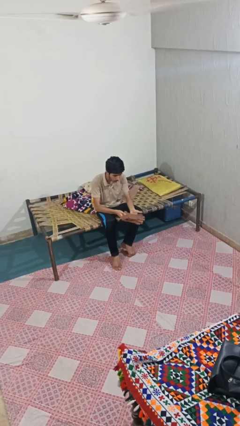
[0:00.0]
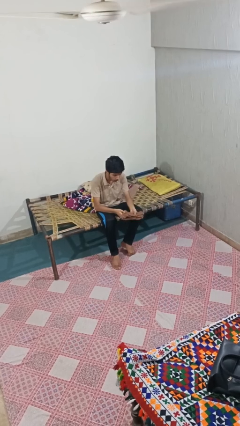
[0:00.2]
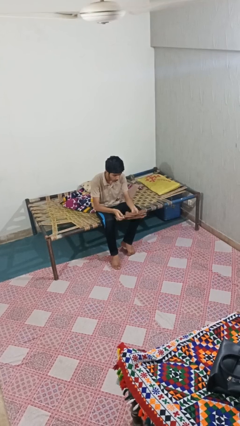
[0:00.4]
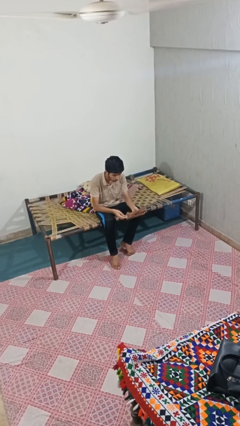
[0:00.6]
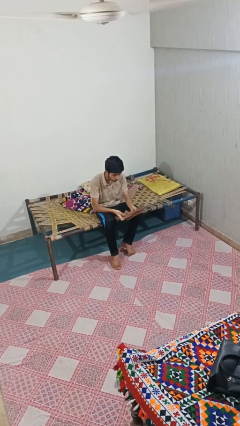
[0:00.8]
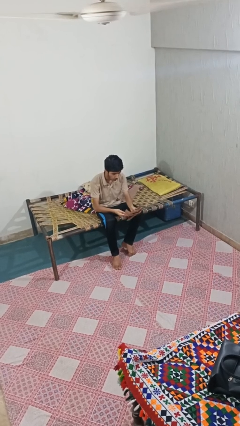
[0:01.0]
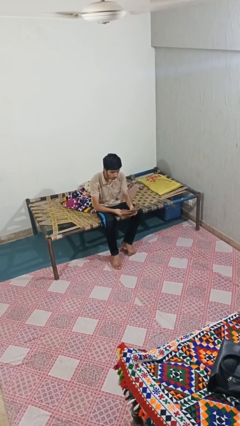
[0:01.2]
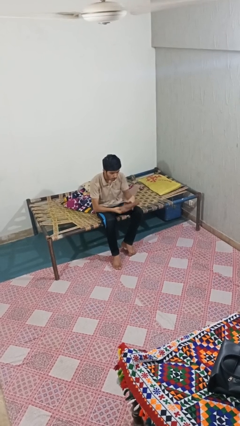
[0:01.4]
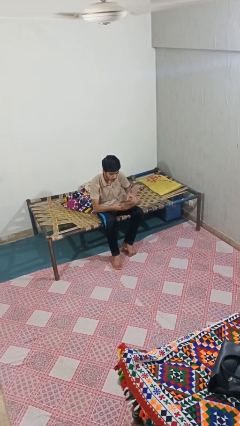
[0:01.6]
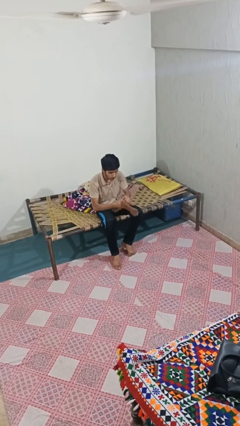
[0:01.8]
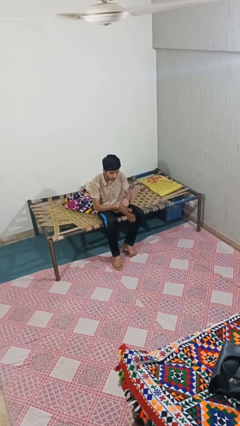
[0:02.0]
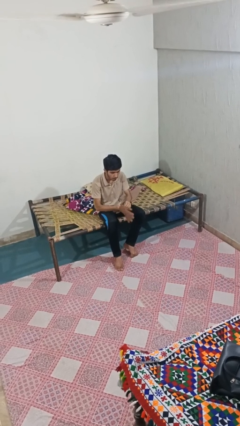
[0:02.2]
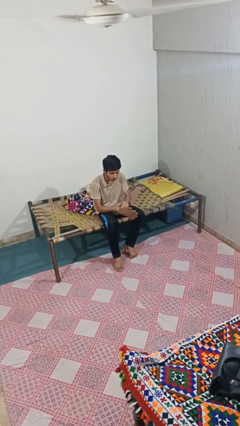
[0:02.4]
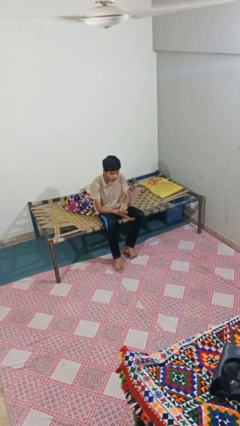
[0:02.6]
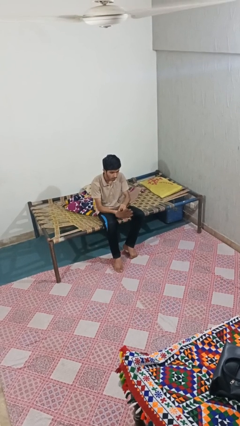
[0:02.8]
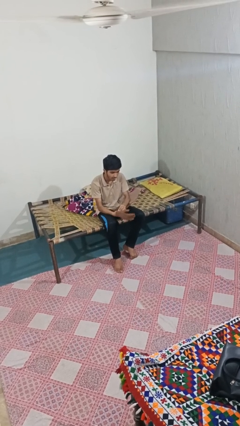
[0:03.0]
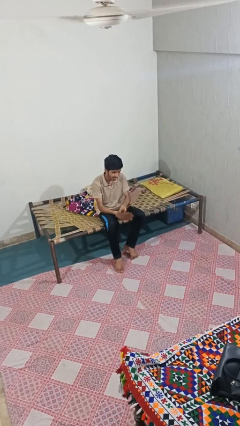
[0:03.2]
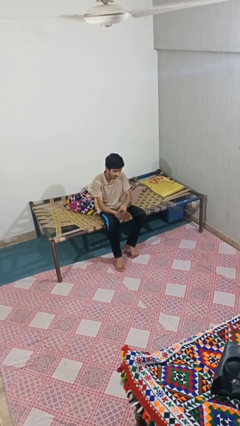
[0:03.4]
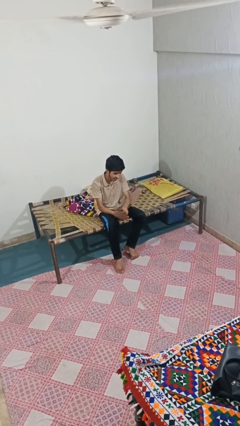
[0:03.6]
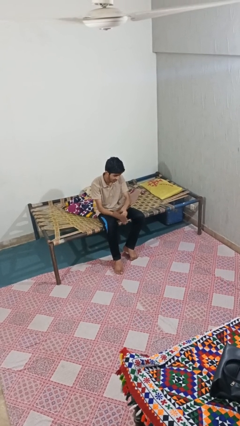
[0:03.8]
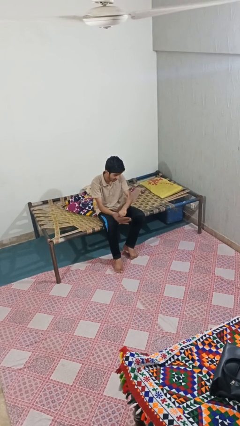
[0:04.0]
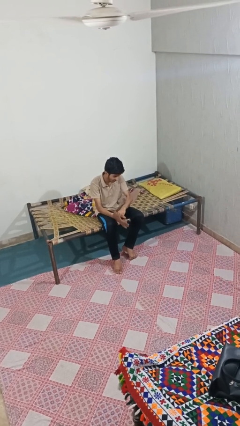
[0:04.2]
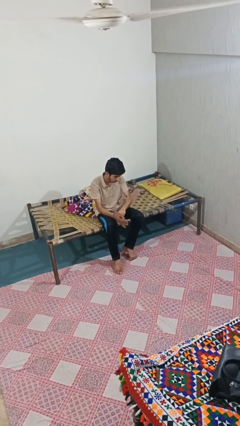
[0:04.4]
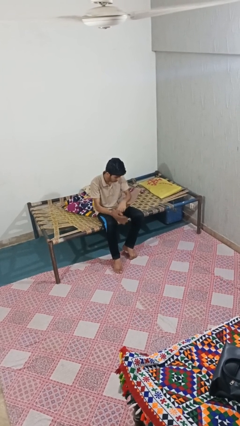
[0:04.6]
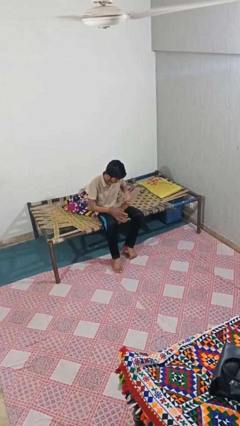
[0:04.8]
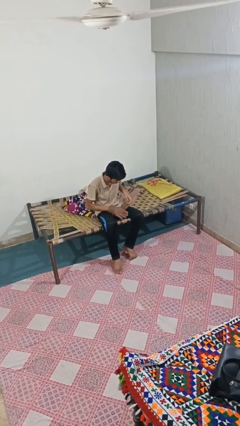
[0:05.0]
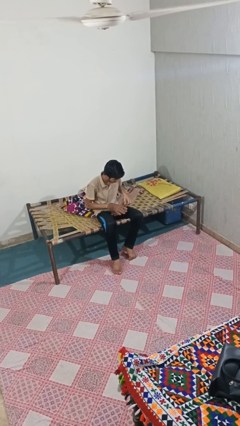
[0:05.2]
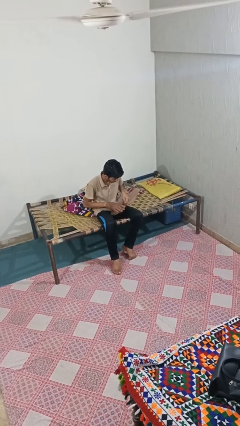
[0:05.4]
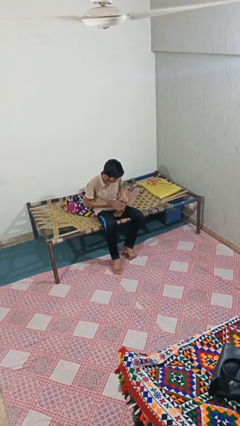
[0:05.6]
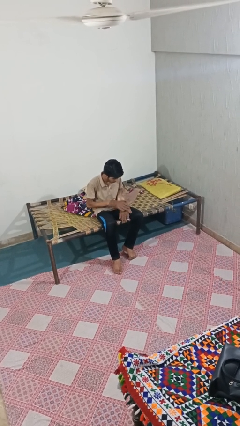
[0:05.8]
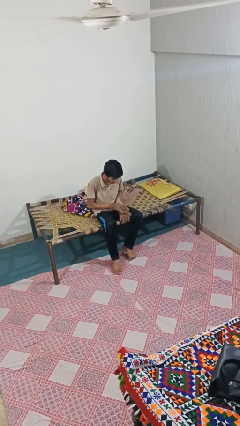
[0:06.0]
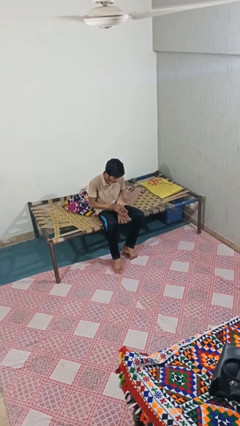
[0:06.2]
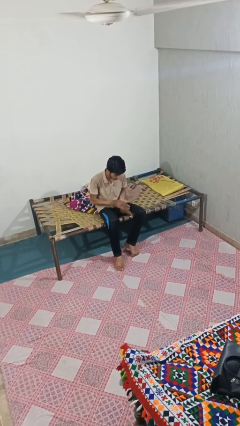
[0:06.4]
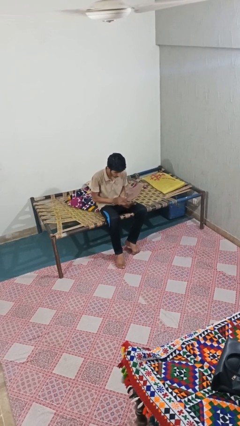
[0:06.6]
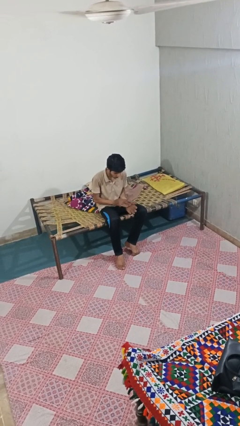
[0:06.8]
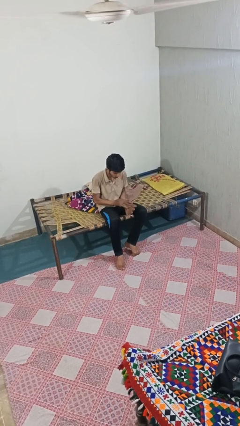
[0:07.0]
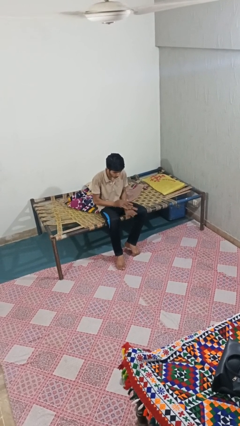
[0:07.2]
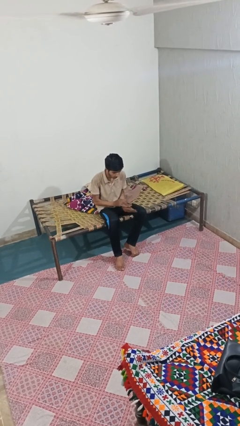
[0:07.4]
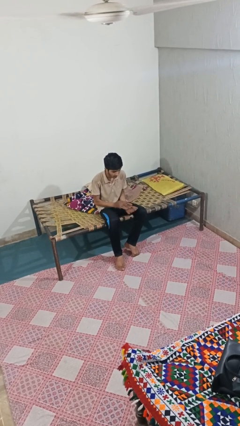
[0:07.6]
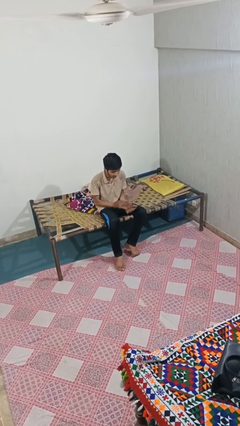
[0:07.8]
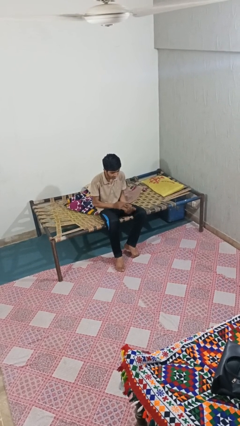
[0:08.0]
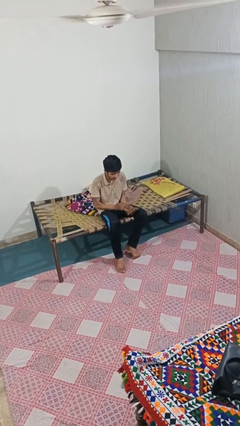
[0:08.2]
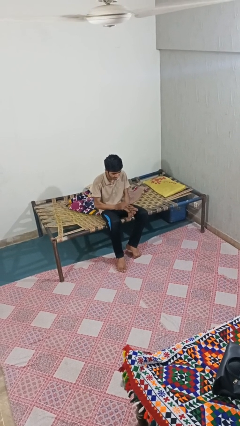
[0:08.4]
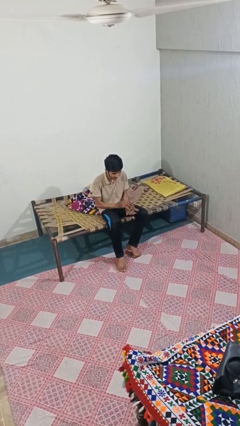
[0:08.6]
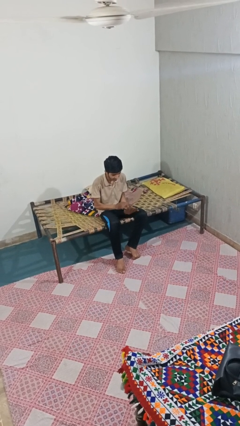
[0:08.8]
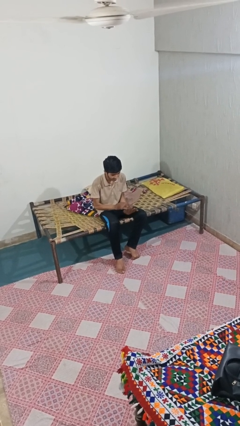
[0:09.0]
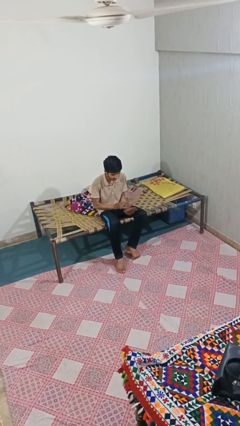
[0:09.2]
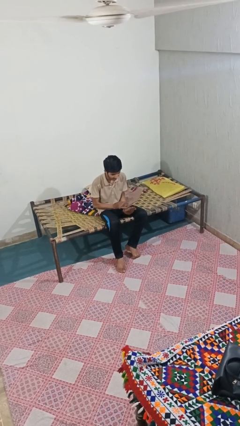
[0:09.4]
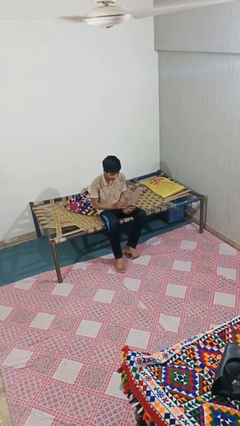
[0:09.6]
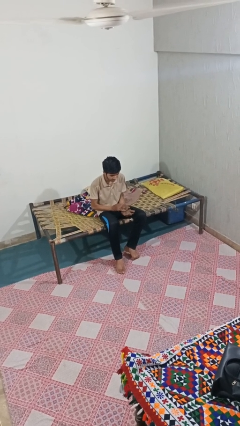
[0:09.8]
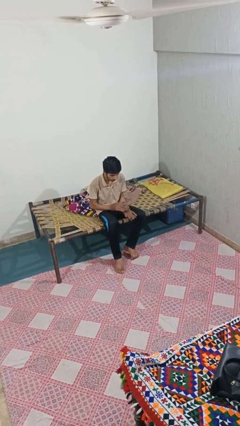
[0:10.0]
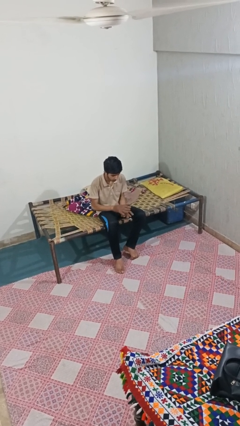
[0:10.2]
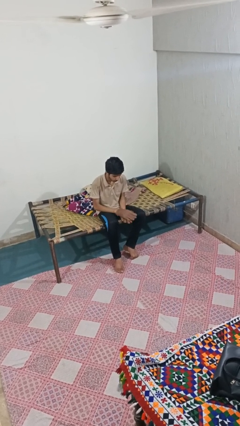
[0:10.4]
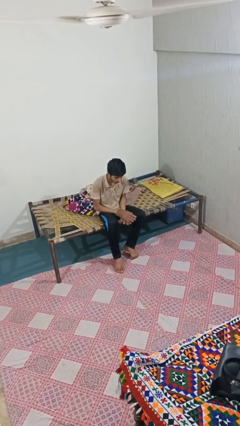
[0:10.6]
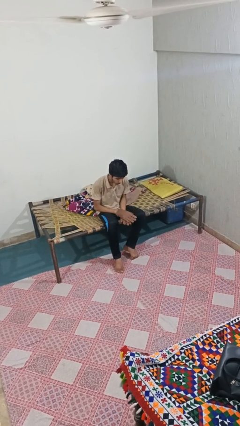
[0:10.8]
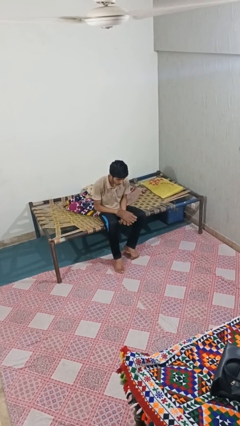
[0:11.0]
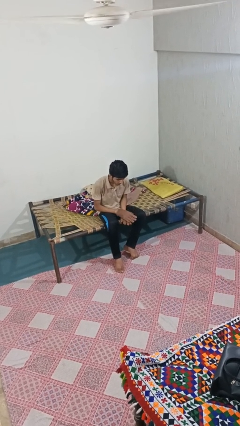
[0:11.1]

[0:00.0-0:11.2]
person puts on gloves

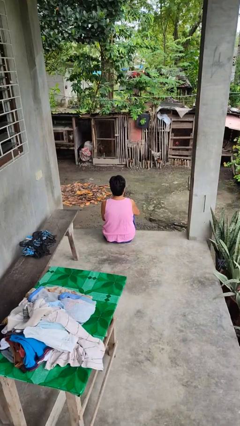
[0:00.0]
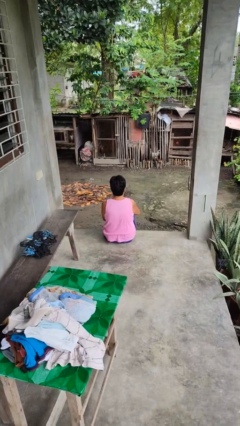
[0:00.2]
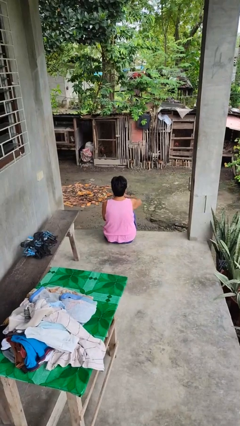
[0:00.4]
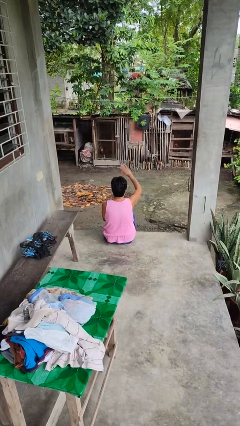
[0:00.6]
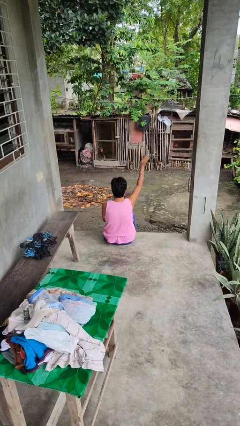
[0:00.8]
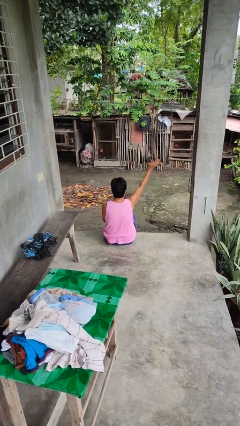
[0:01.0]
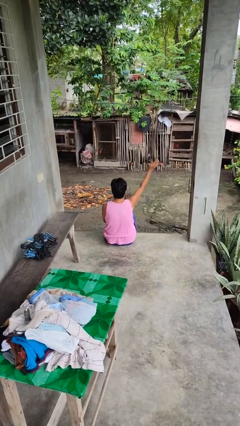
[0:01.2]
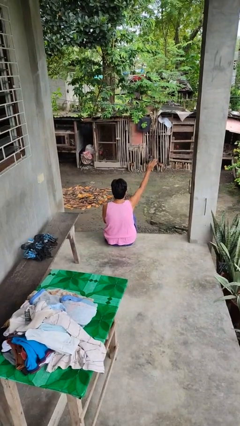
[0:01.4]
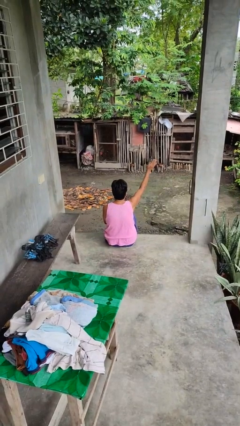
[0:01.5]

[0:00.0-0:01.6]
person gestures swipe up

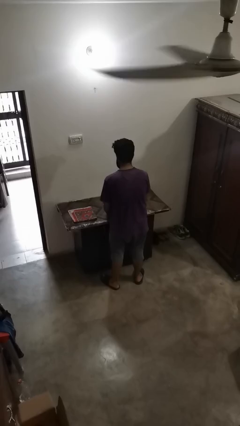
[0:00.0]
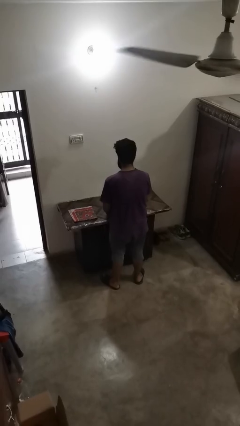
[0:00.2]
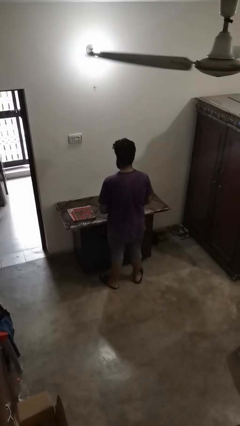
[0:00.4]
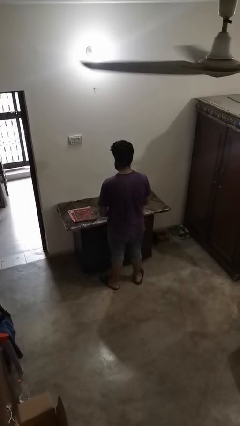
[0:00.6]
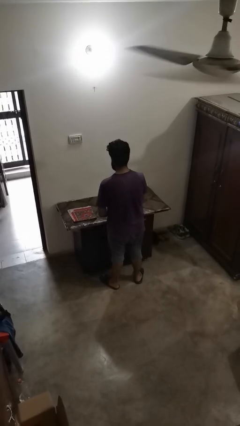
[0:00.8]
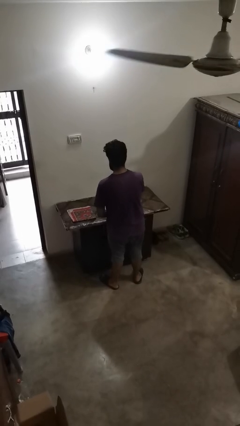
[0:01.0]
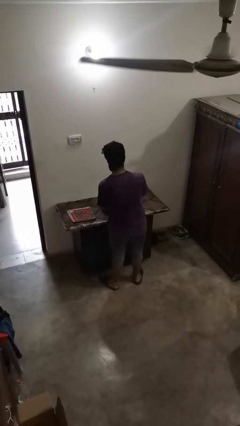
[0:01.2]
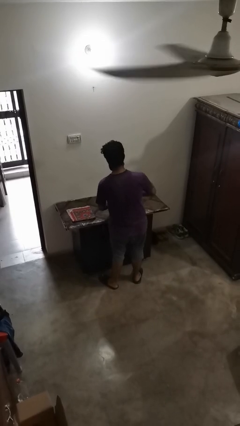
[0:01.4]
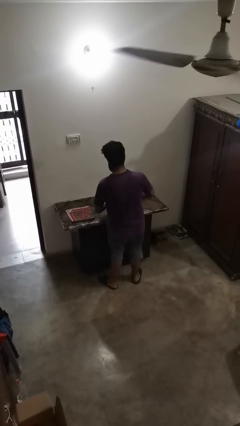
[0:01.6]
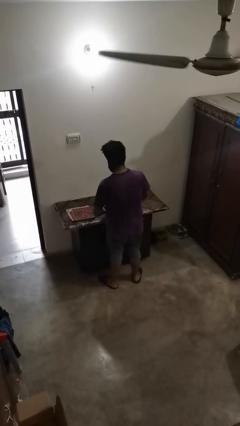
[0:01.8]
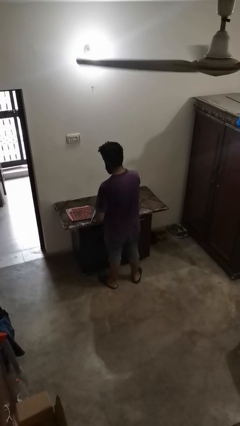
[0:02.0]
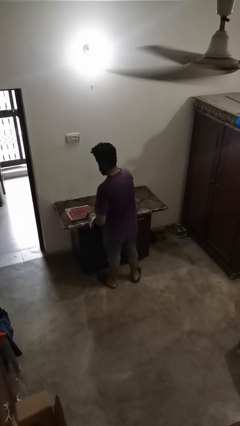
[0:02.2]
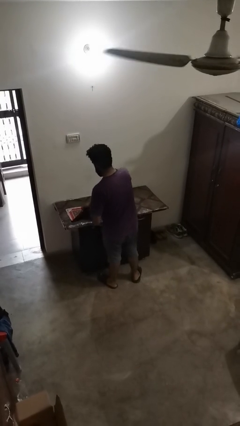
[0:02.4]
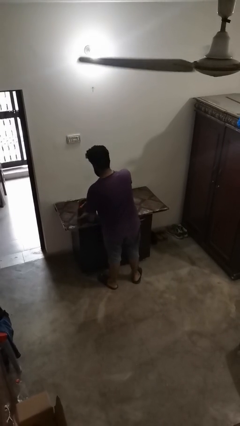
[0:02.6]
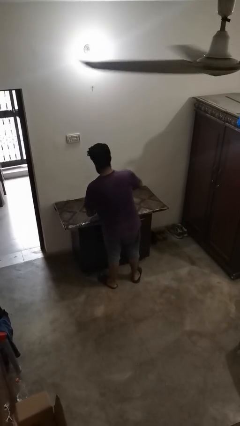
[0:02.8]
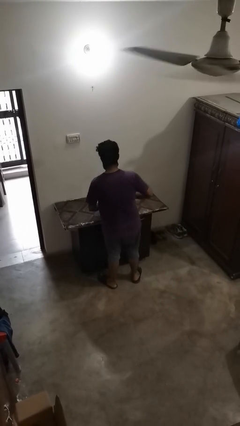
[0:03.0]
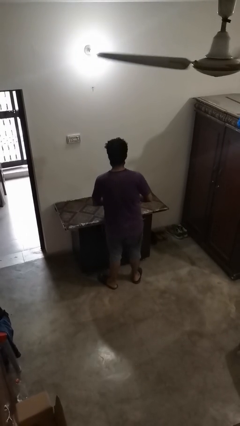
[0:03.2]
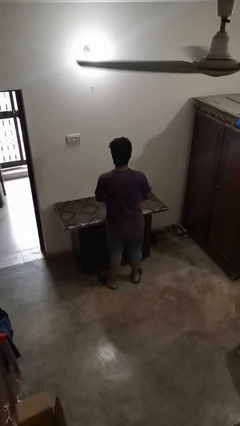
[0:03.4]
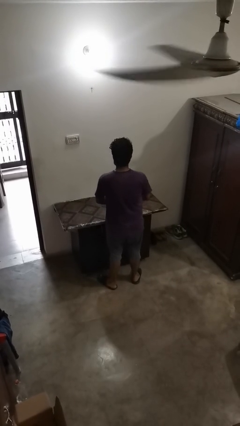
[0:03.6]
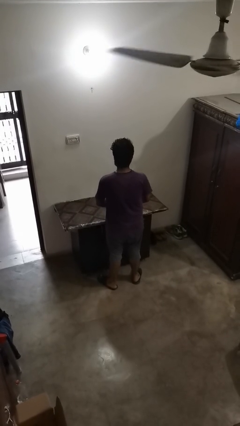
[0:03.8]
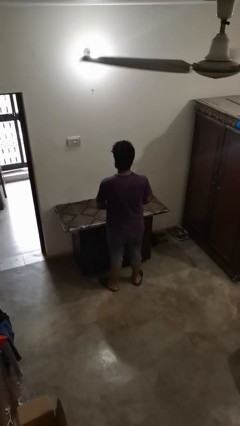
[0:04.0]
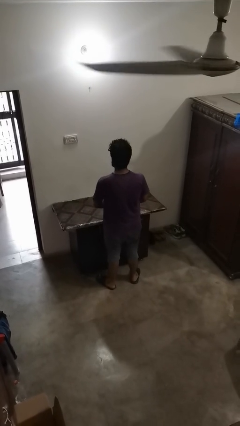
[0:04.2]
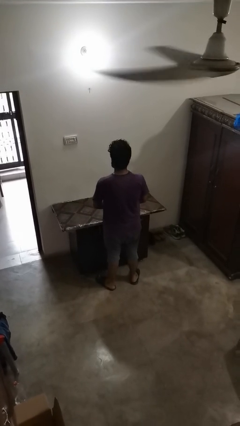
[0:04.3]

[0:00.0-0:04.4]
person folds tablecloth

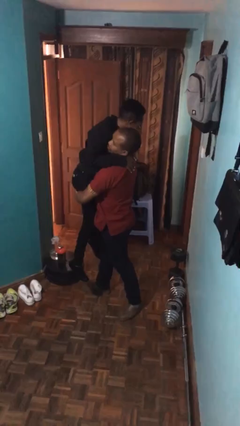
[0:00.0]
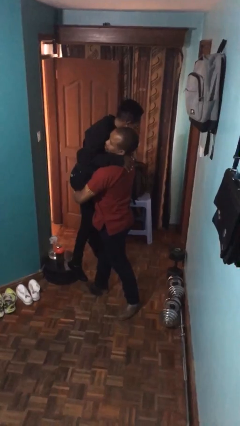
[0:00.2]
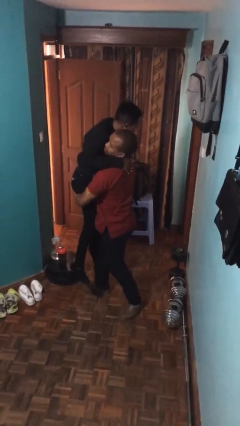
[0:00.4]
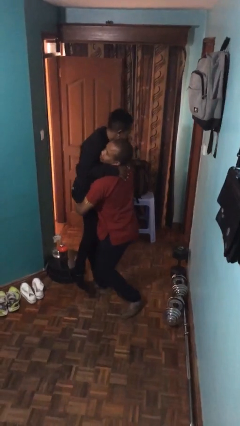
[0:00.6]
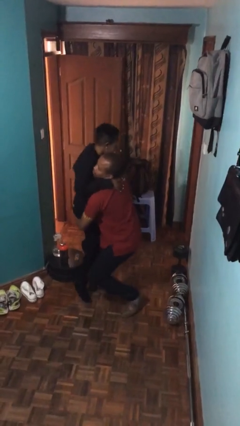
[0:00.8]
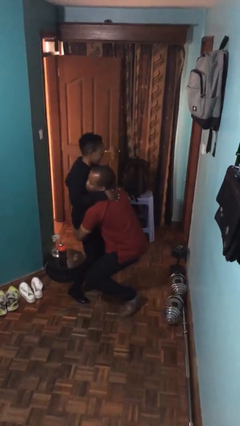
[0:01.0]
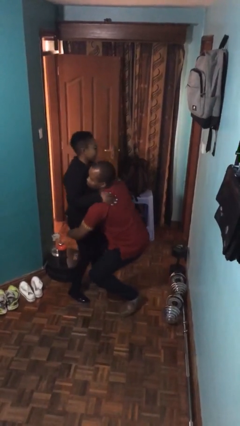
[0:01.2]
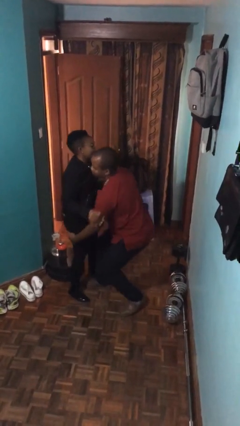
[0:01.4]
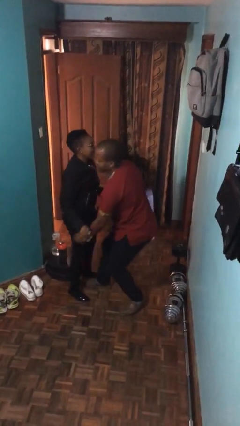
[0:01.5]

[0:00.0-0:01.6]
person puts down person
